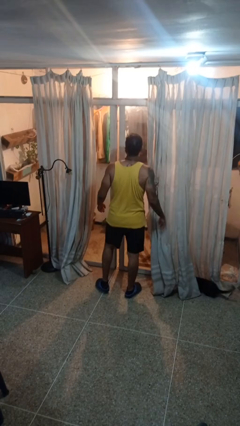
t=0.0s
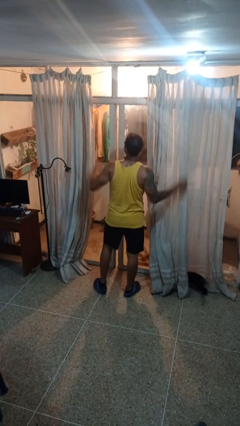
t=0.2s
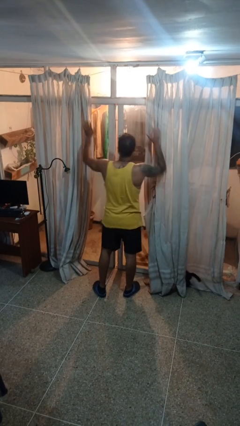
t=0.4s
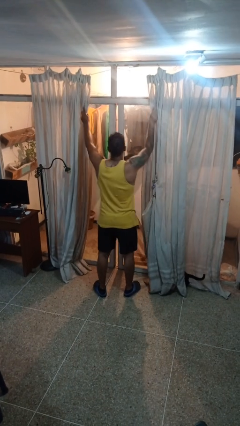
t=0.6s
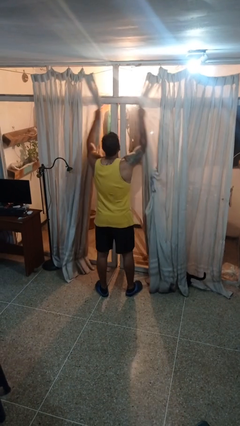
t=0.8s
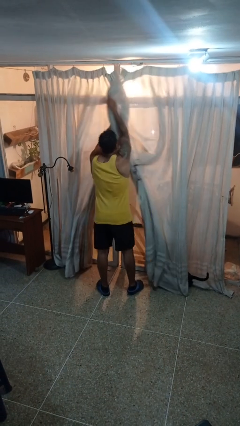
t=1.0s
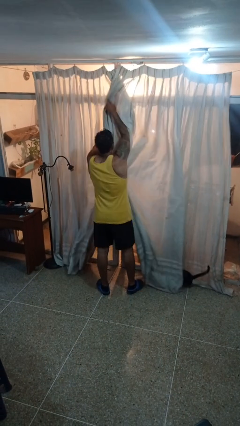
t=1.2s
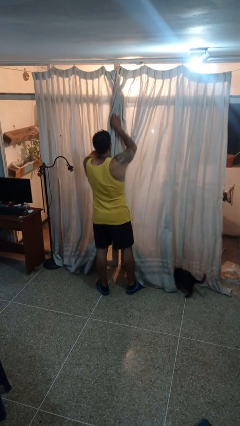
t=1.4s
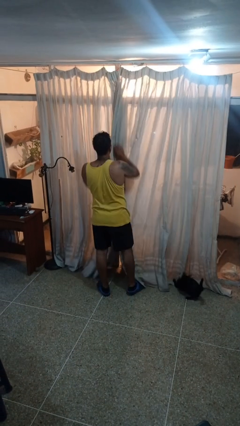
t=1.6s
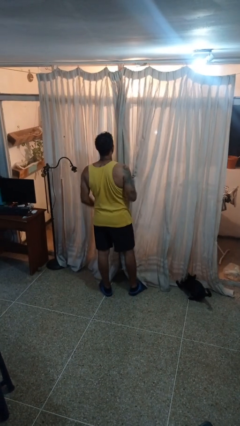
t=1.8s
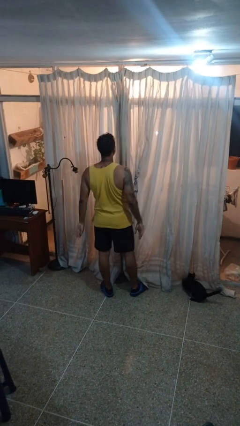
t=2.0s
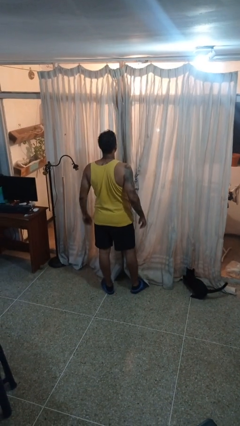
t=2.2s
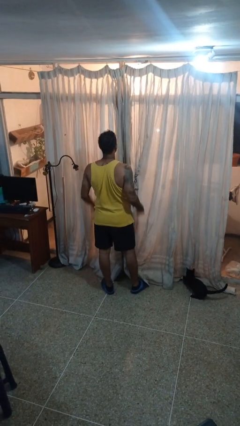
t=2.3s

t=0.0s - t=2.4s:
person closes curtains

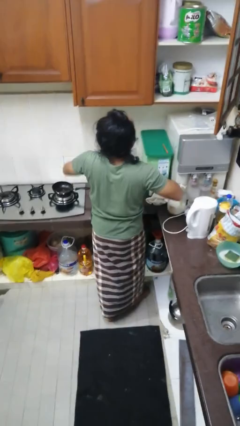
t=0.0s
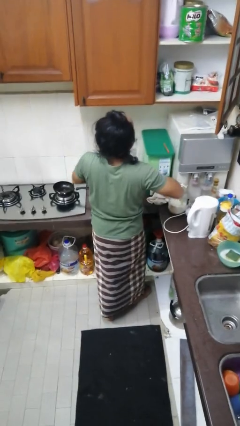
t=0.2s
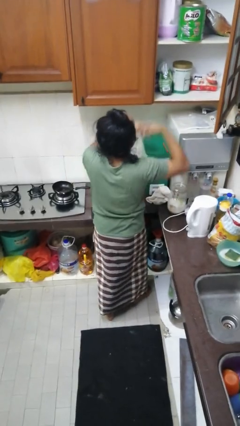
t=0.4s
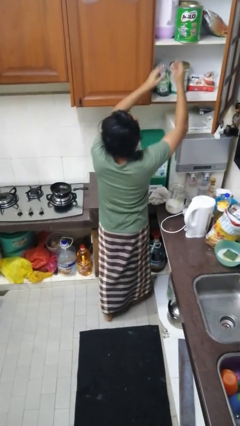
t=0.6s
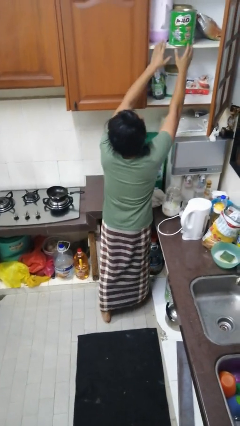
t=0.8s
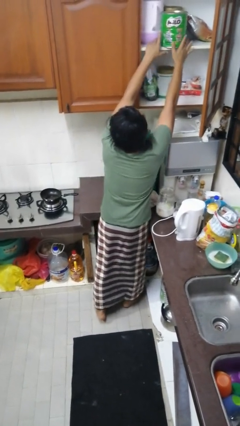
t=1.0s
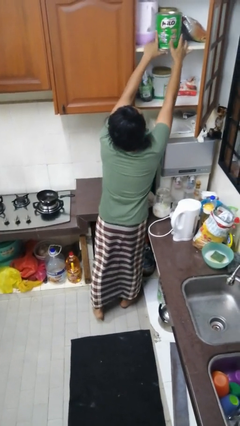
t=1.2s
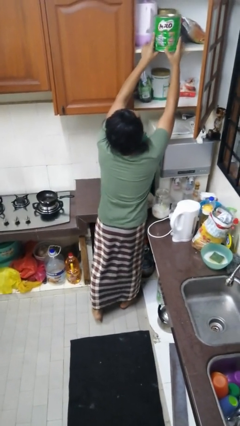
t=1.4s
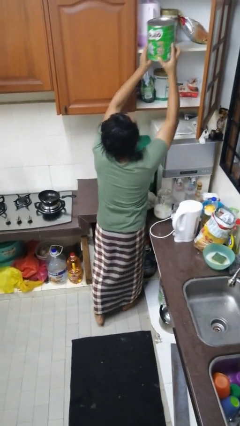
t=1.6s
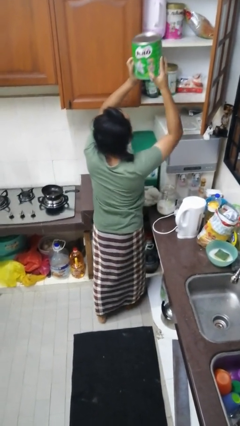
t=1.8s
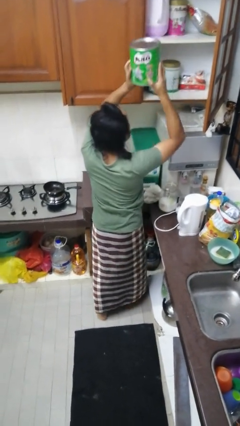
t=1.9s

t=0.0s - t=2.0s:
person takes object from cabinet

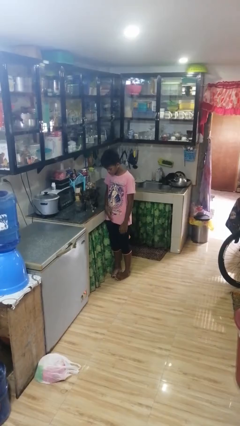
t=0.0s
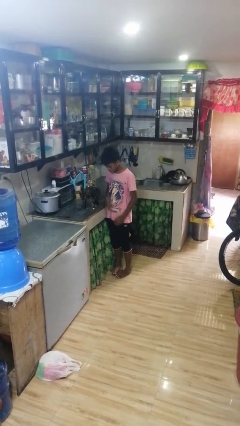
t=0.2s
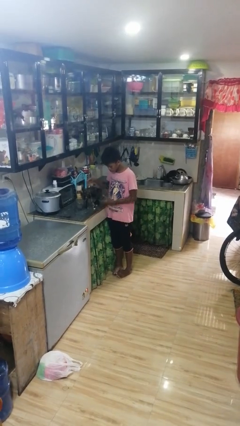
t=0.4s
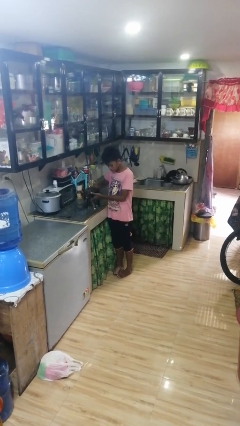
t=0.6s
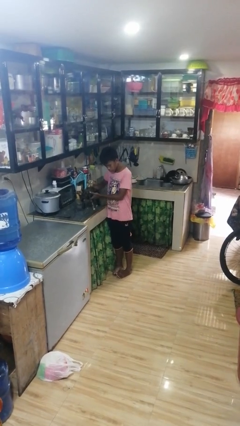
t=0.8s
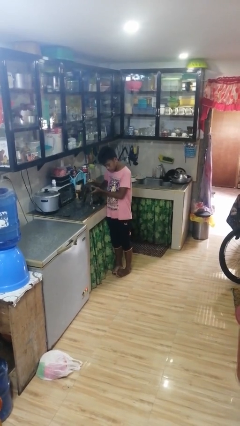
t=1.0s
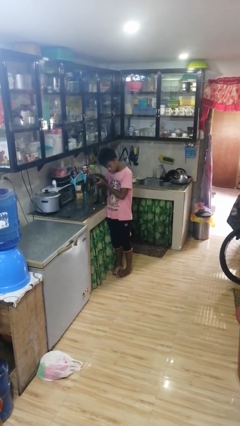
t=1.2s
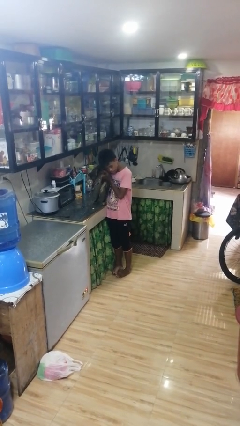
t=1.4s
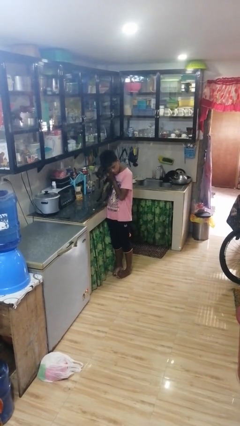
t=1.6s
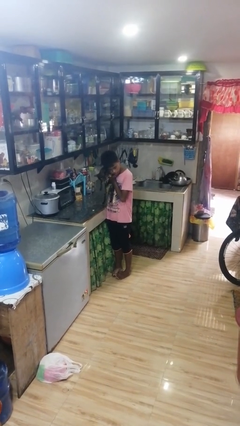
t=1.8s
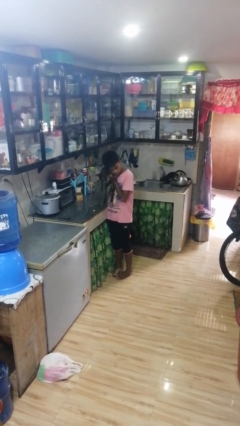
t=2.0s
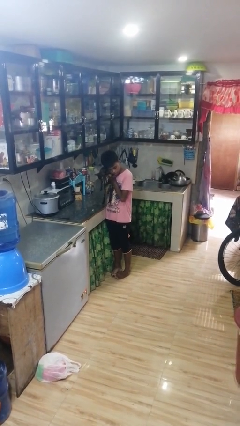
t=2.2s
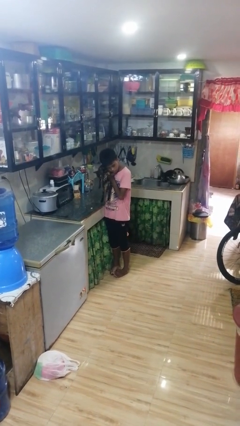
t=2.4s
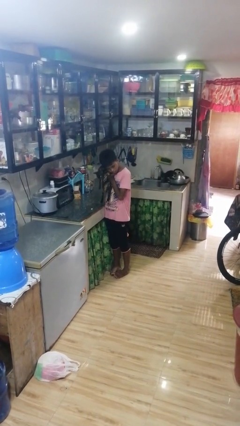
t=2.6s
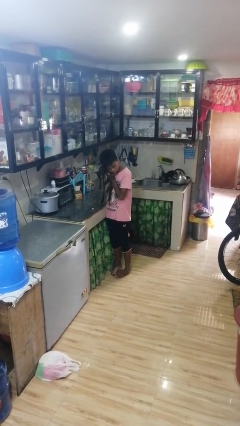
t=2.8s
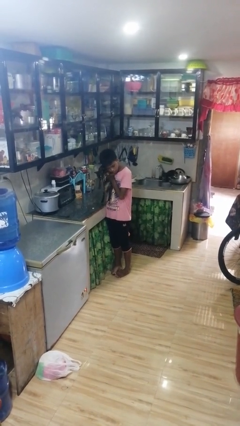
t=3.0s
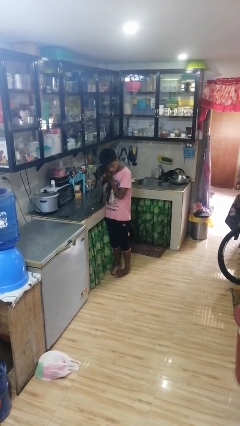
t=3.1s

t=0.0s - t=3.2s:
person hugs cat

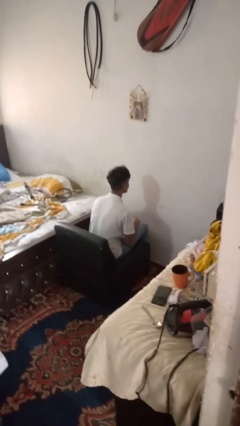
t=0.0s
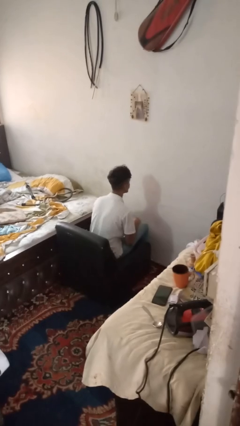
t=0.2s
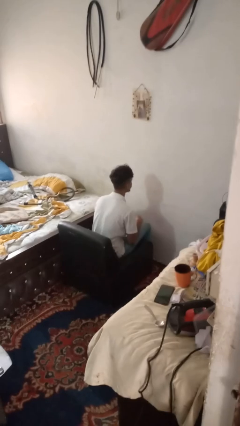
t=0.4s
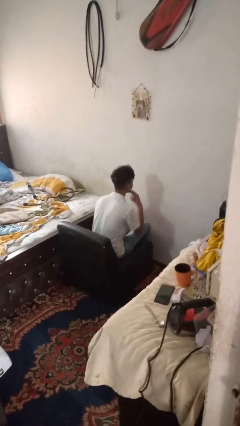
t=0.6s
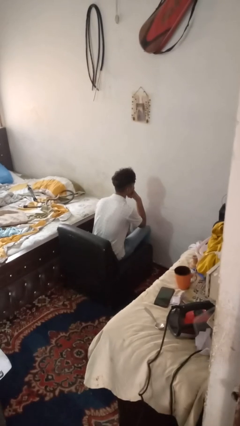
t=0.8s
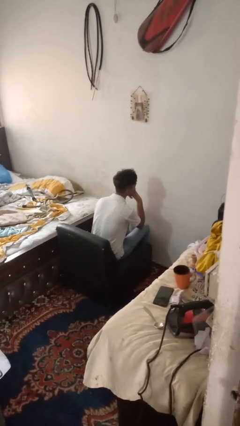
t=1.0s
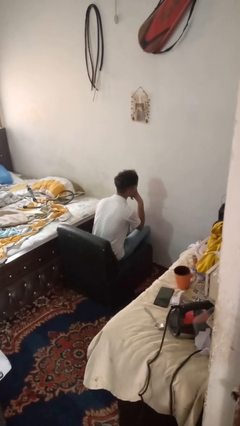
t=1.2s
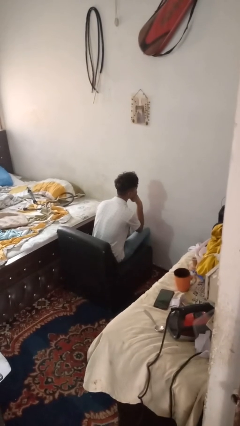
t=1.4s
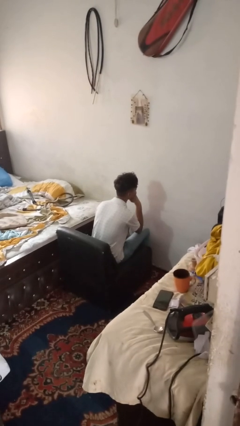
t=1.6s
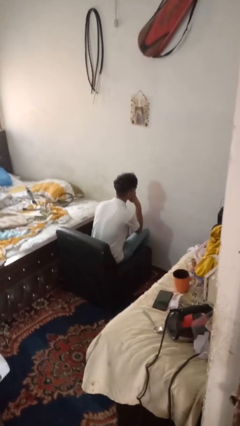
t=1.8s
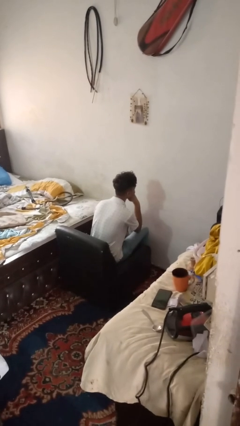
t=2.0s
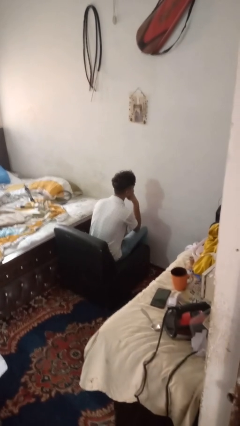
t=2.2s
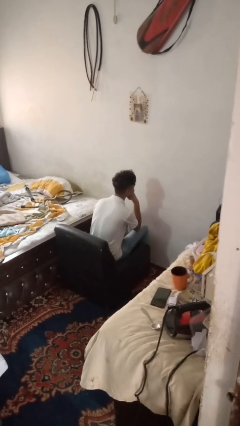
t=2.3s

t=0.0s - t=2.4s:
person strokes chin

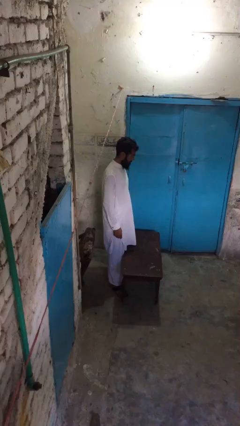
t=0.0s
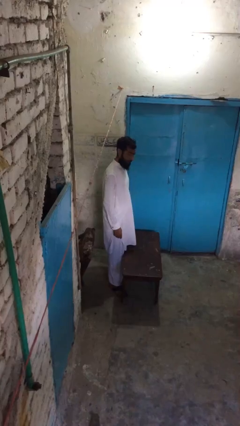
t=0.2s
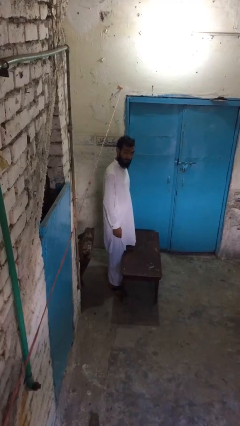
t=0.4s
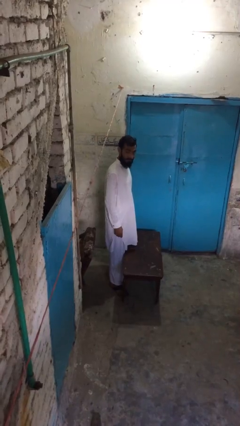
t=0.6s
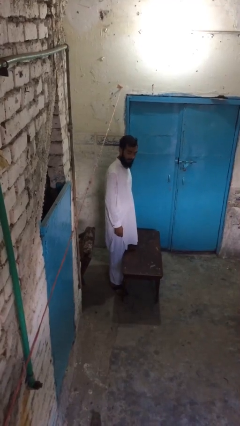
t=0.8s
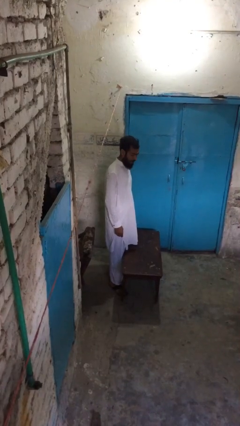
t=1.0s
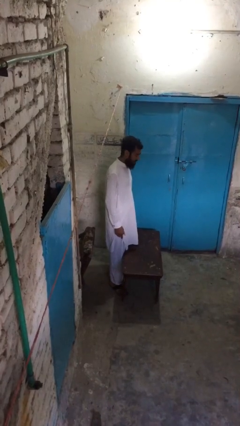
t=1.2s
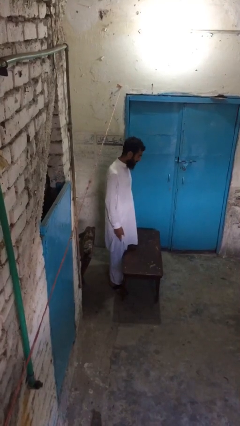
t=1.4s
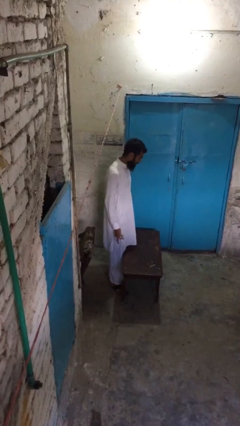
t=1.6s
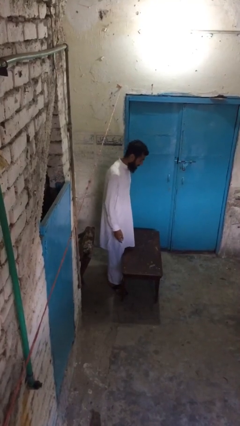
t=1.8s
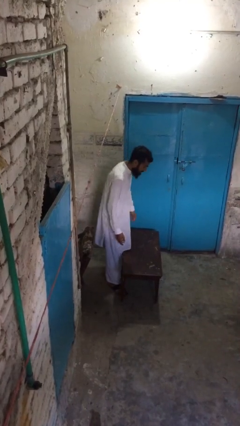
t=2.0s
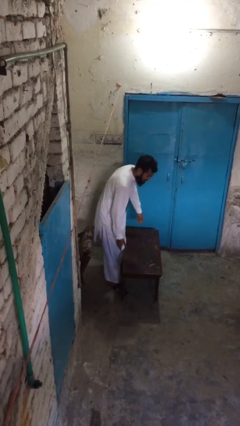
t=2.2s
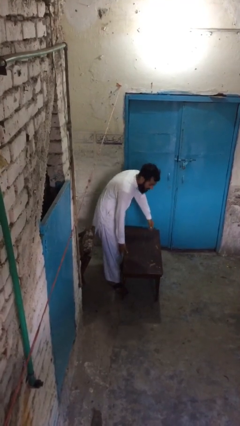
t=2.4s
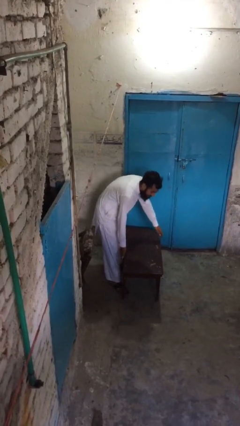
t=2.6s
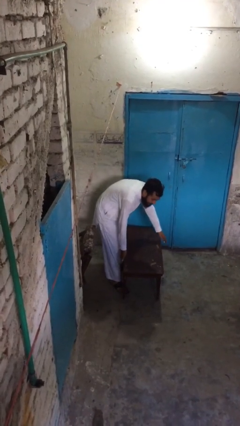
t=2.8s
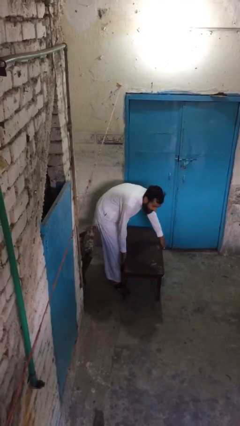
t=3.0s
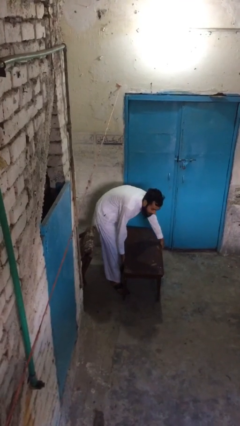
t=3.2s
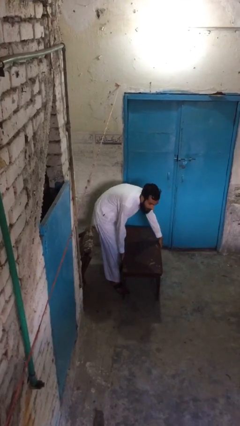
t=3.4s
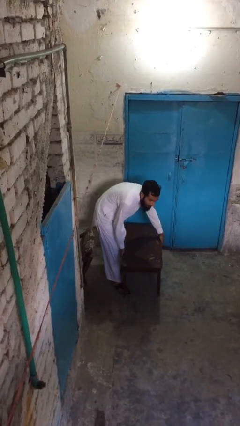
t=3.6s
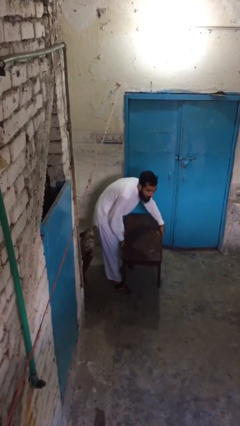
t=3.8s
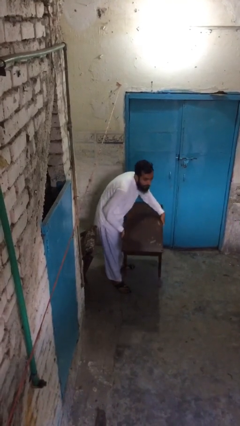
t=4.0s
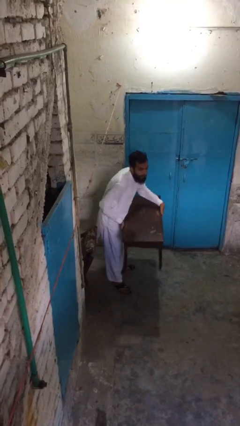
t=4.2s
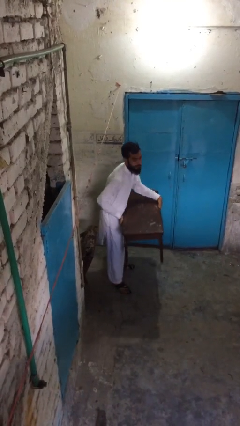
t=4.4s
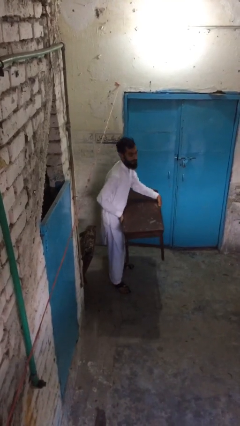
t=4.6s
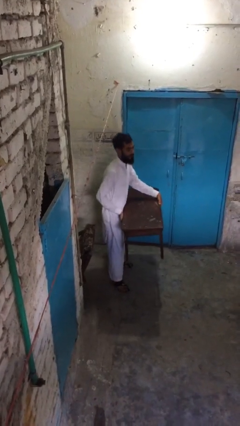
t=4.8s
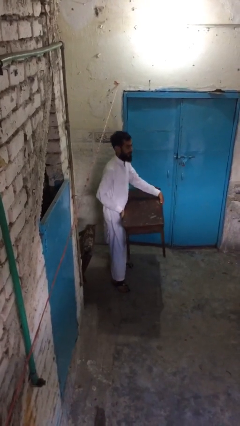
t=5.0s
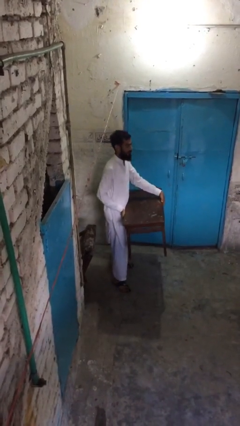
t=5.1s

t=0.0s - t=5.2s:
person picks up object from floor

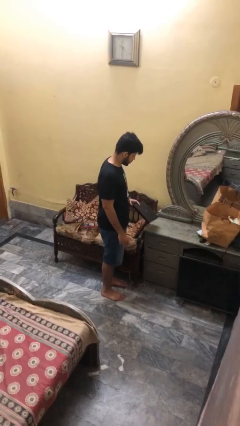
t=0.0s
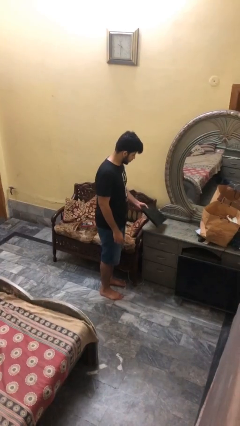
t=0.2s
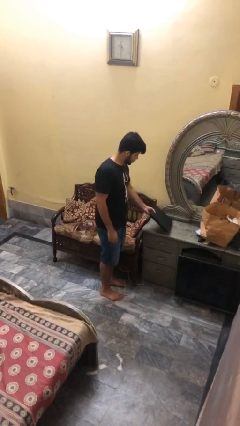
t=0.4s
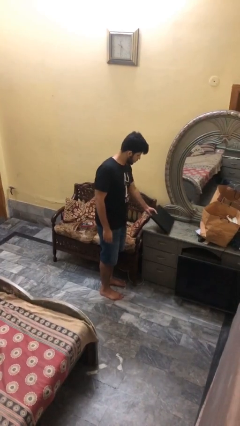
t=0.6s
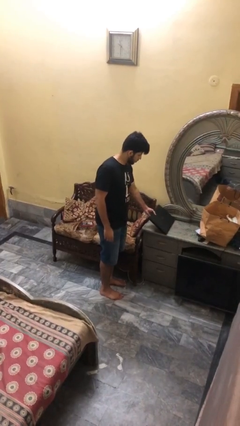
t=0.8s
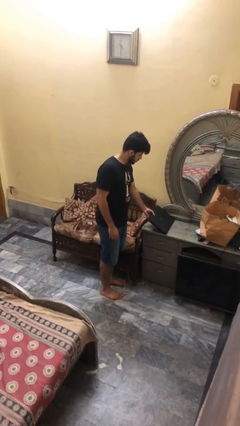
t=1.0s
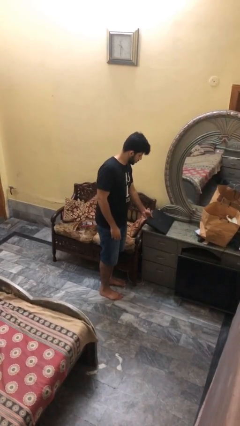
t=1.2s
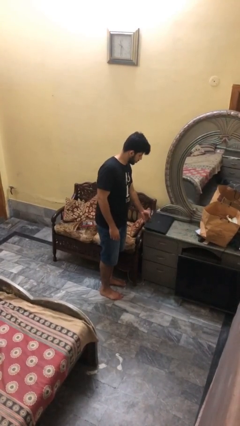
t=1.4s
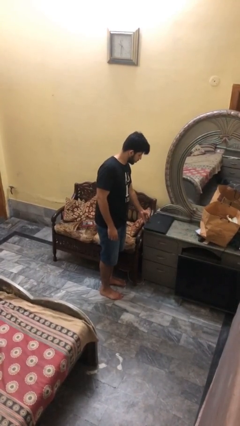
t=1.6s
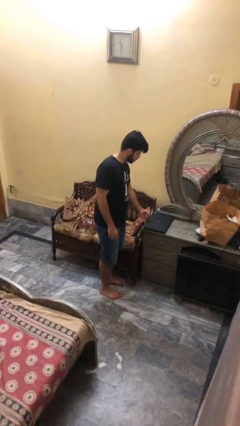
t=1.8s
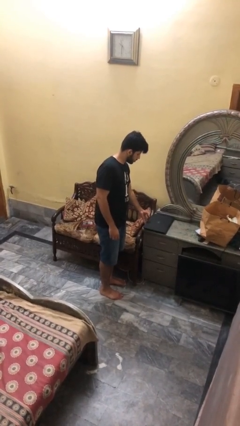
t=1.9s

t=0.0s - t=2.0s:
person puts down object on countertop
